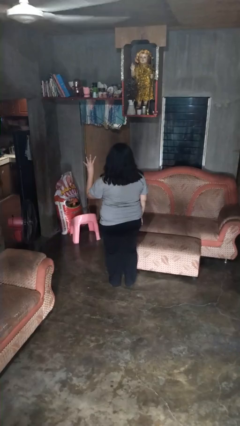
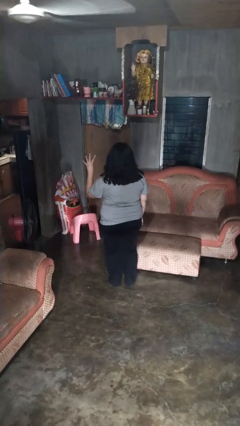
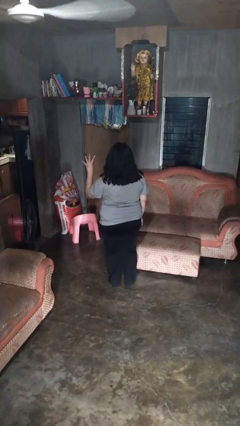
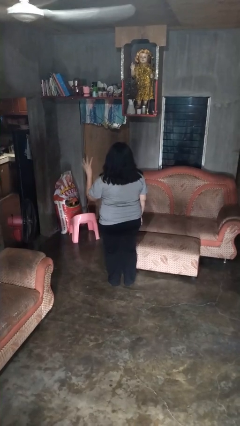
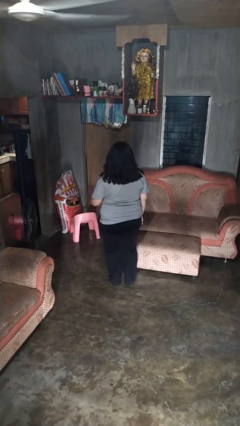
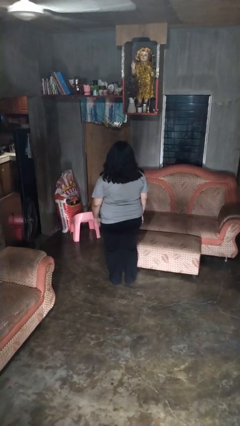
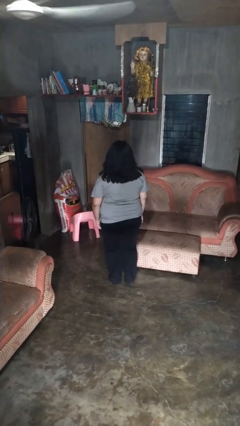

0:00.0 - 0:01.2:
person gestures number four

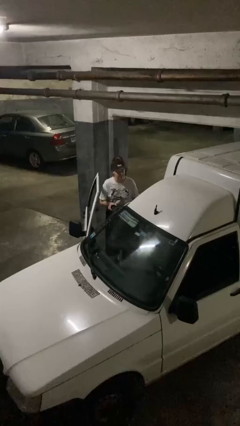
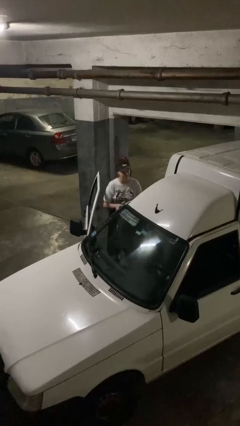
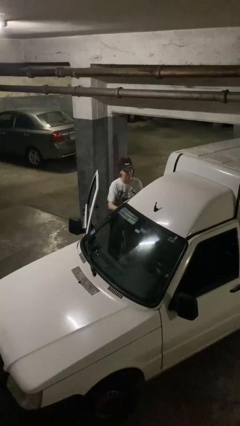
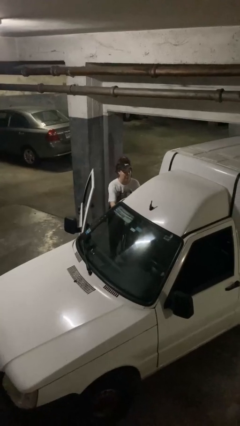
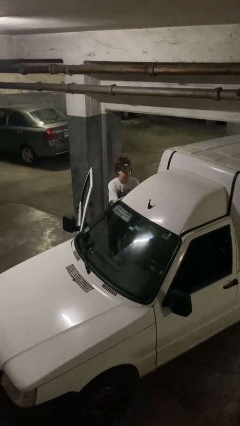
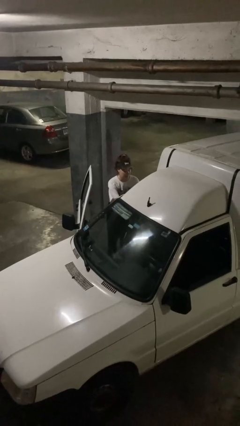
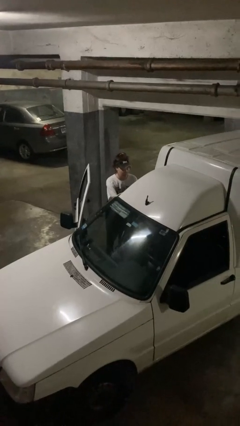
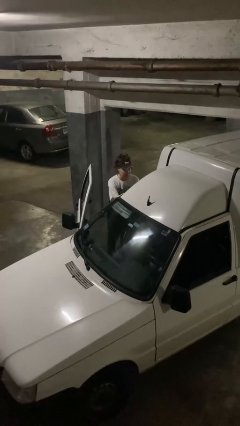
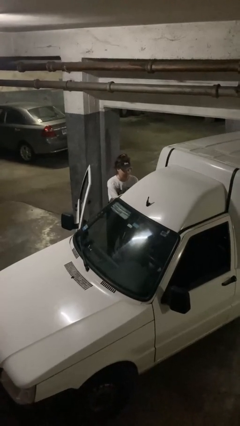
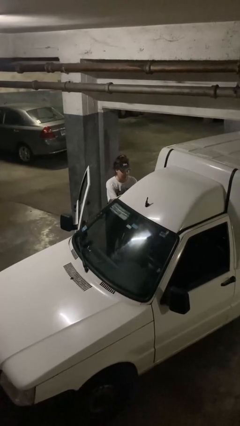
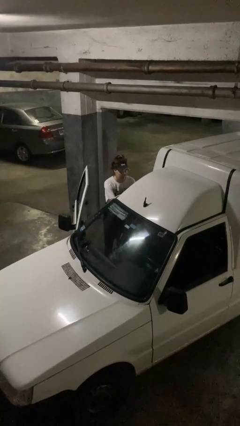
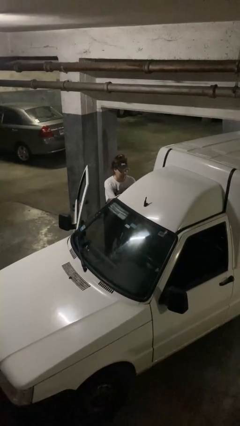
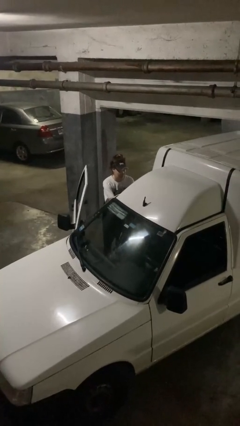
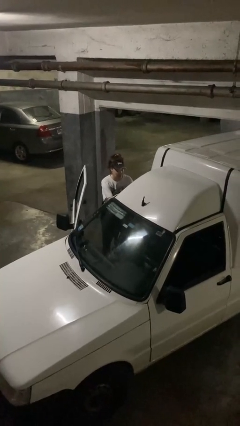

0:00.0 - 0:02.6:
person loads car

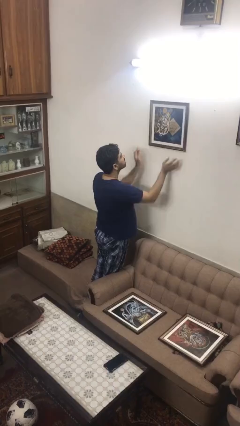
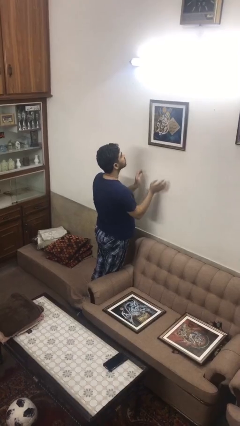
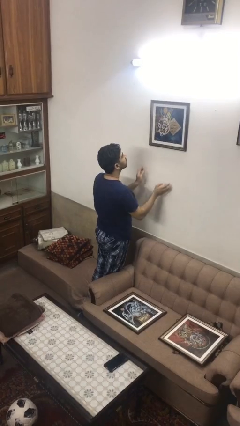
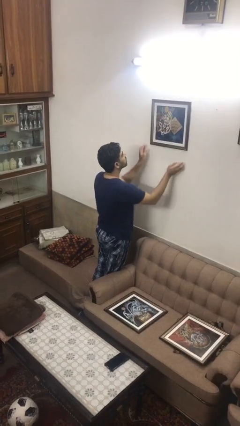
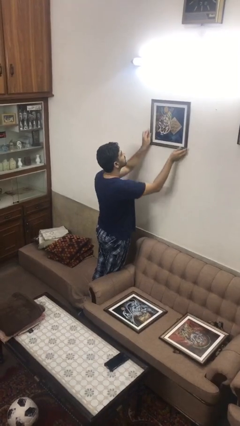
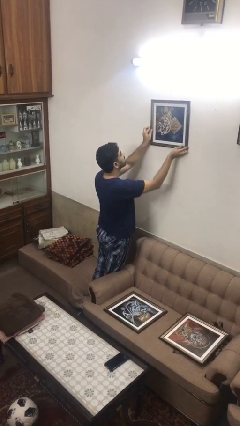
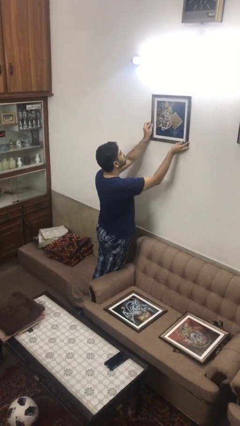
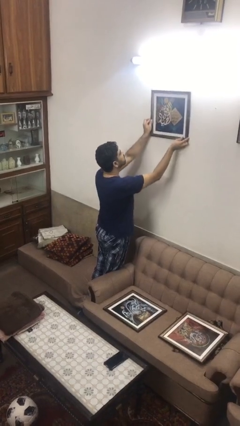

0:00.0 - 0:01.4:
person takes down picture frame

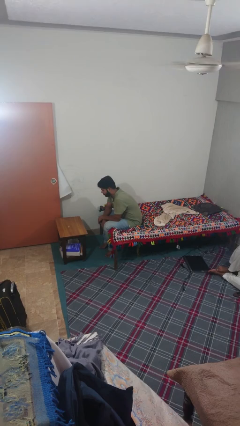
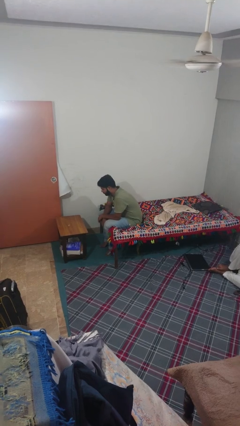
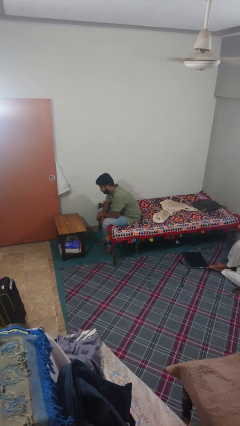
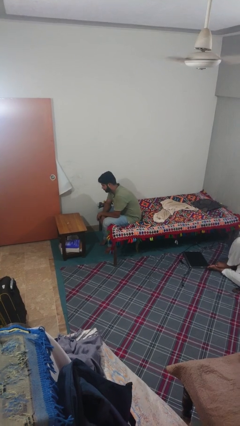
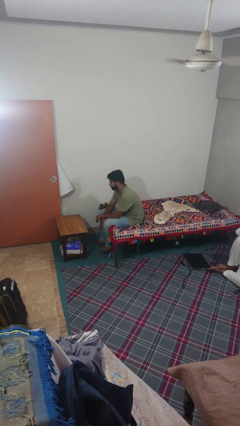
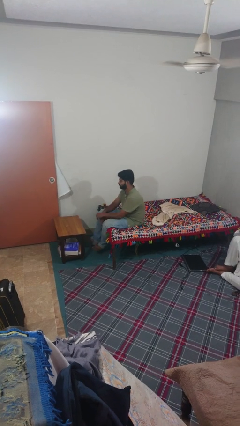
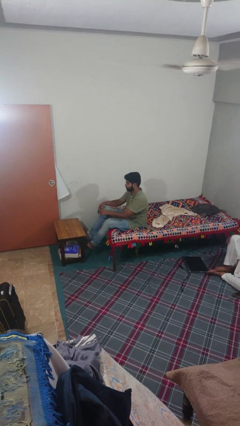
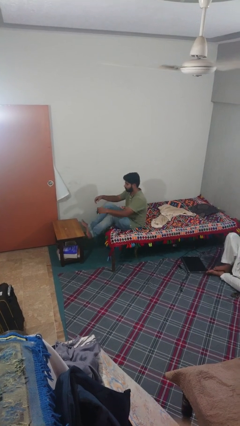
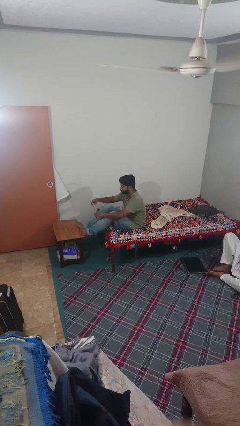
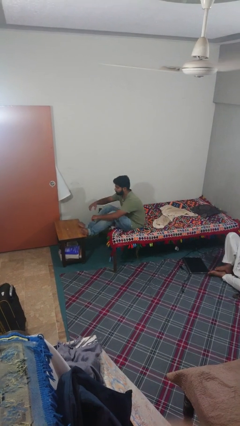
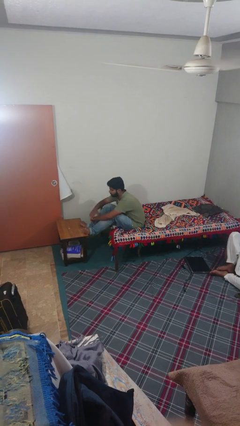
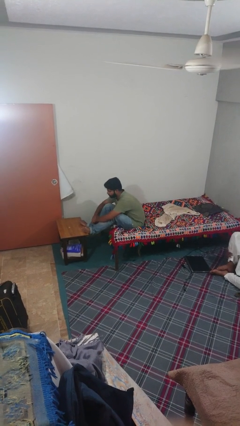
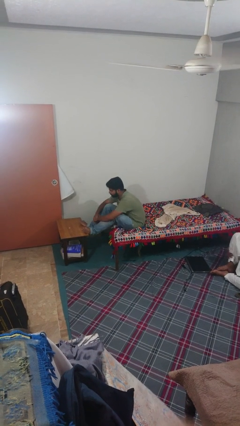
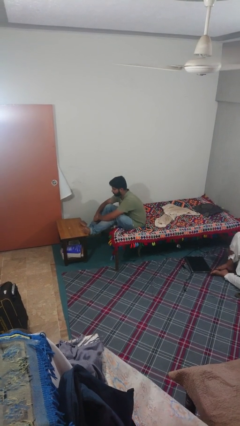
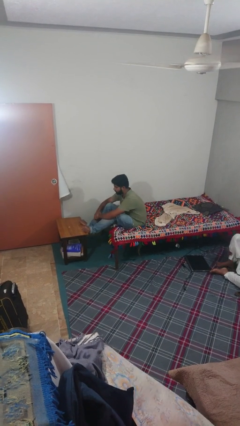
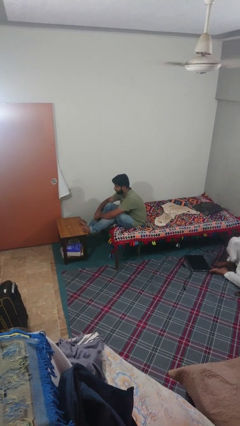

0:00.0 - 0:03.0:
person puts feet up

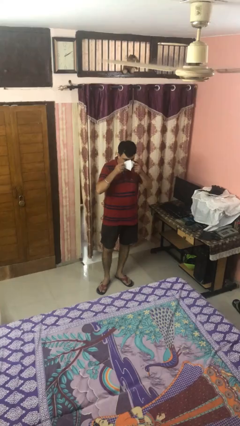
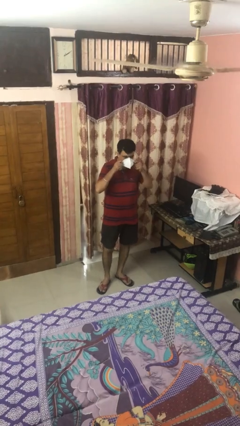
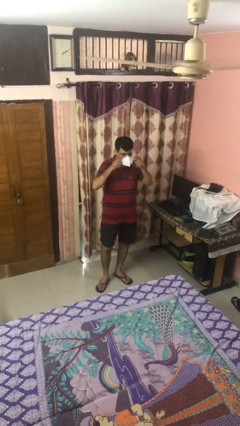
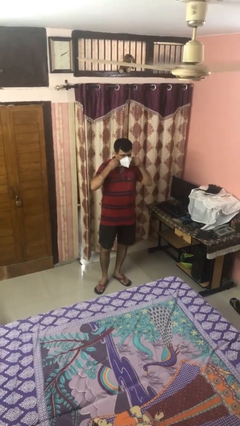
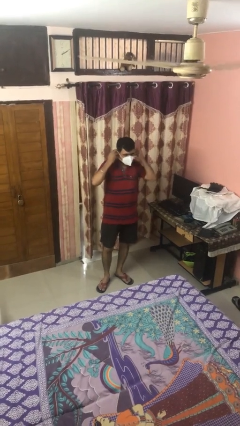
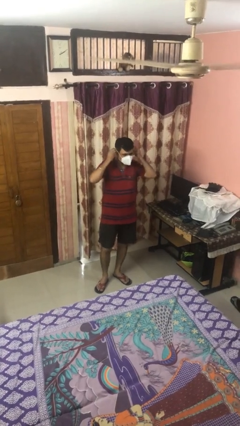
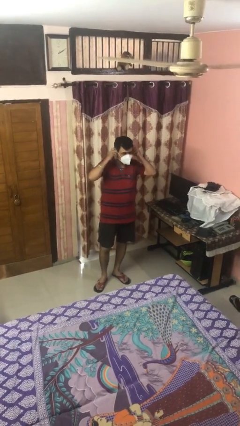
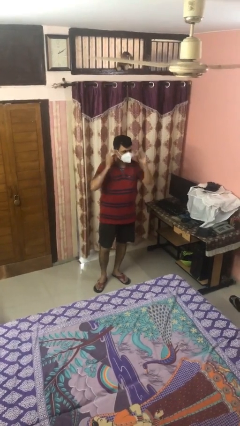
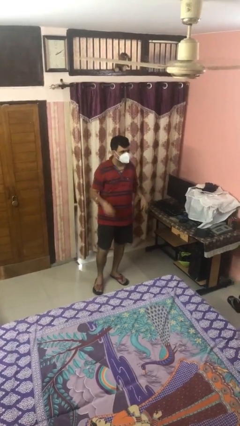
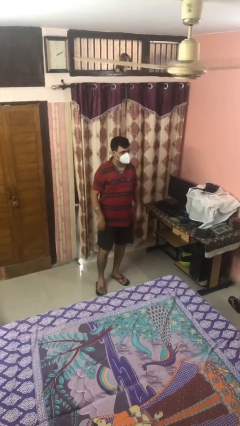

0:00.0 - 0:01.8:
person puts on facemask

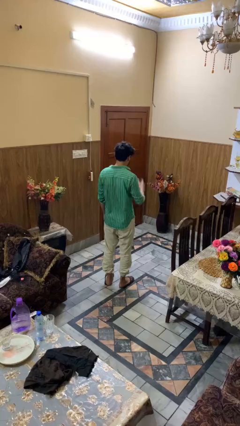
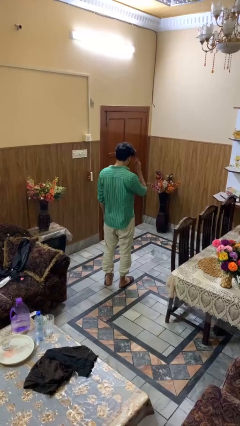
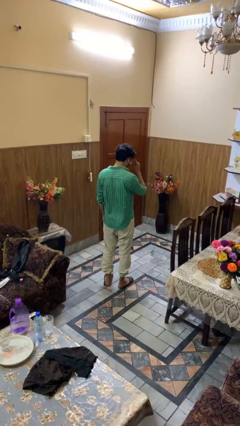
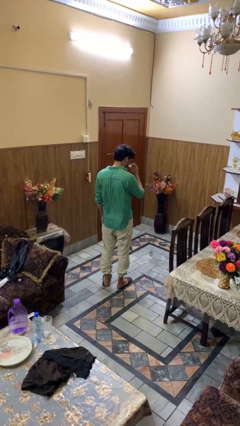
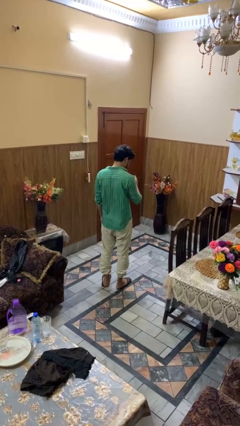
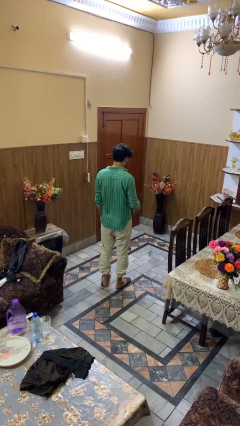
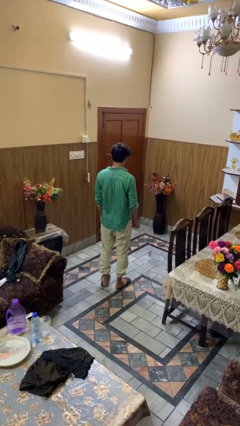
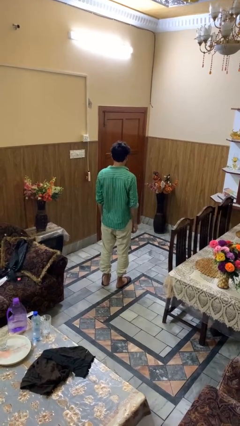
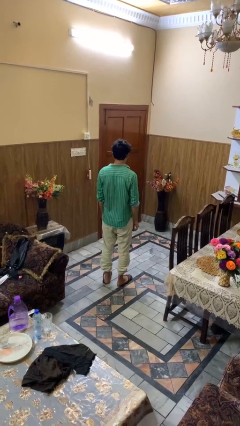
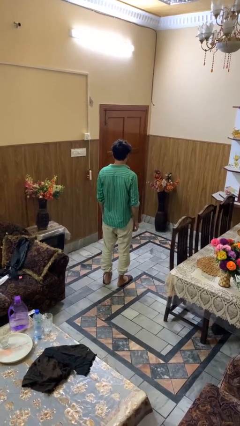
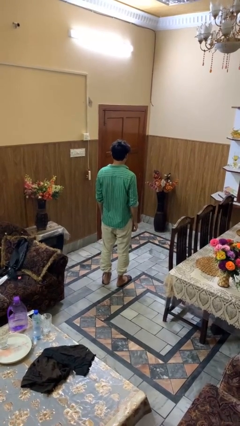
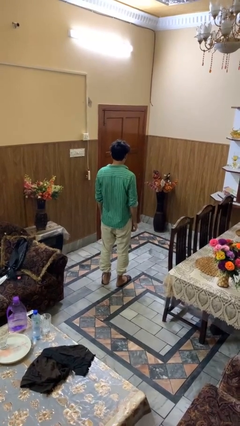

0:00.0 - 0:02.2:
person takes off glasses

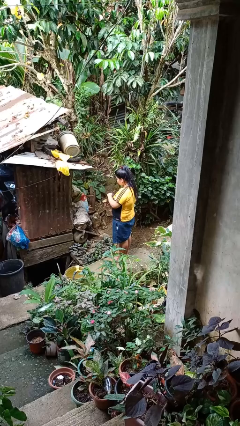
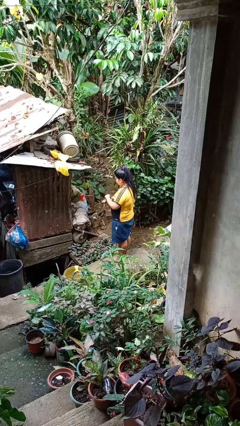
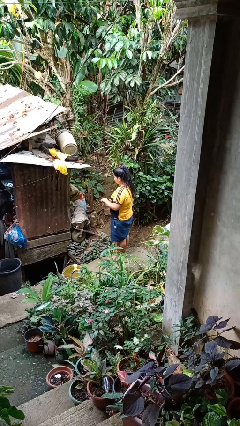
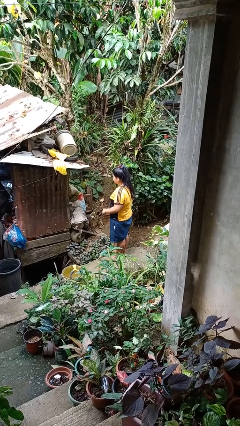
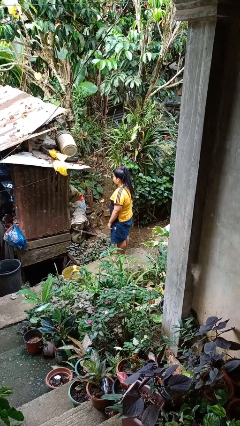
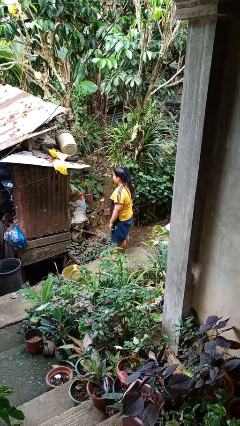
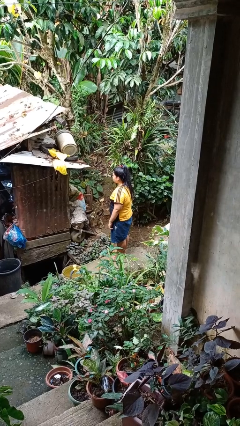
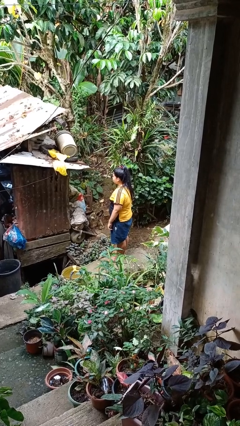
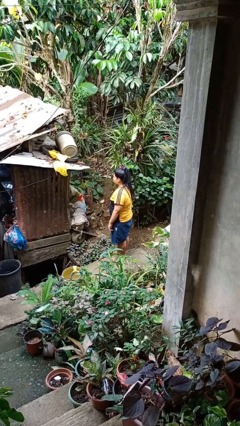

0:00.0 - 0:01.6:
person takes off wristwatch

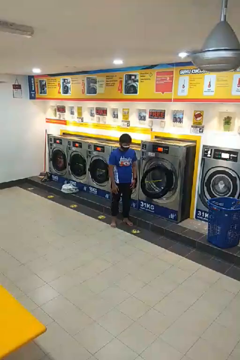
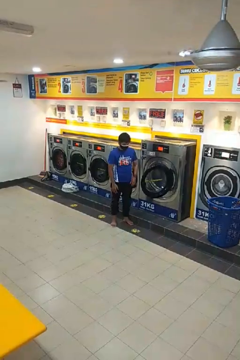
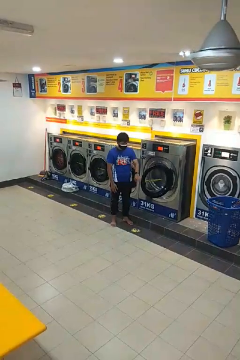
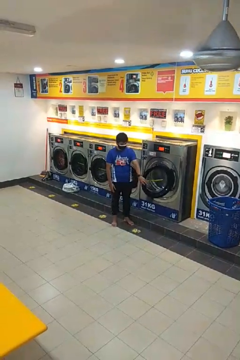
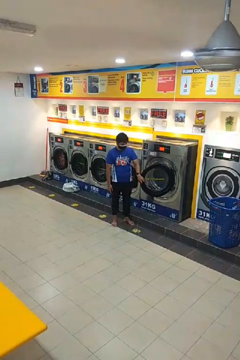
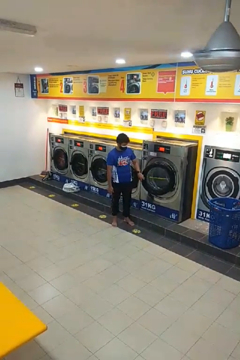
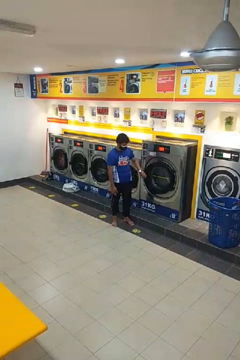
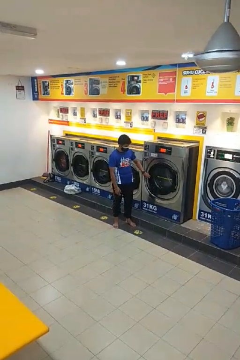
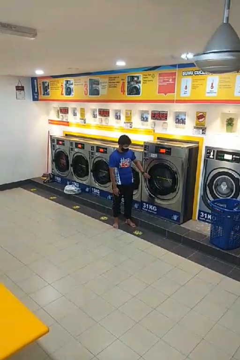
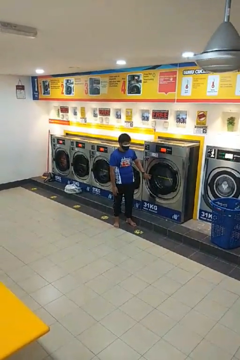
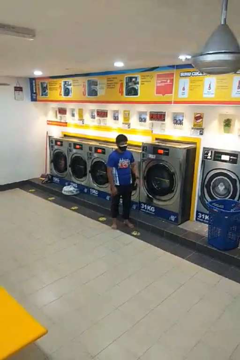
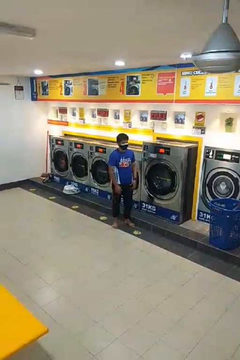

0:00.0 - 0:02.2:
person closes clothes washer

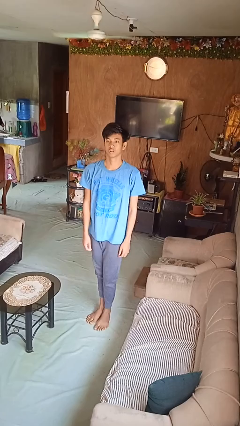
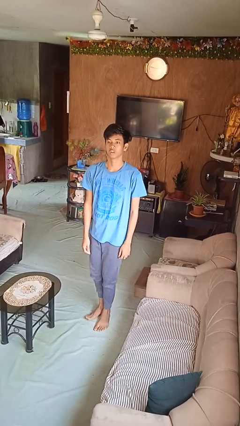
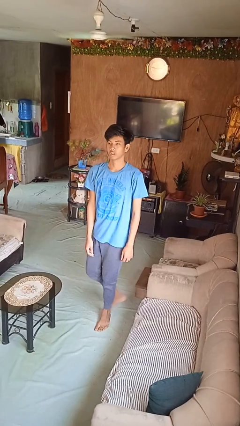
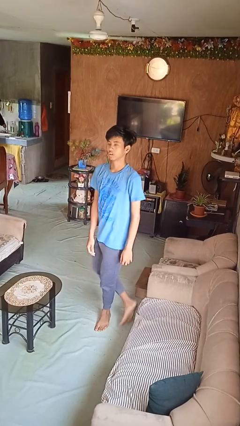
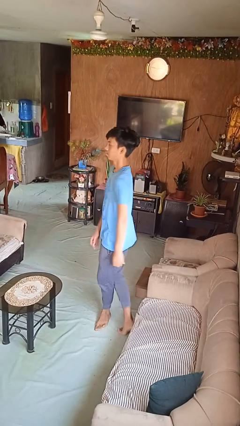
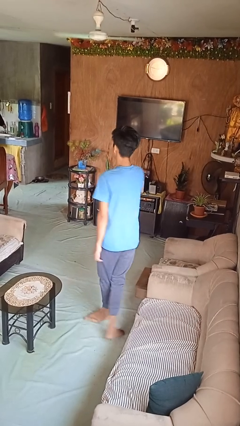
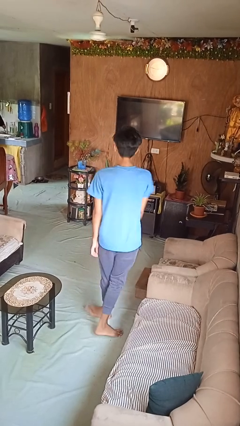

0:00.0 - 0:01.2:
person twirls
